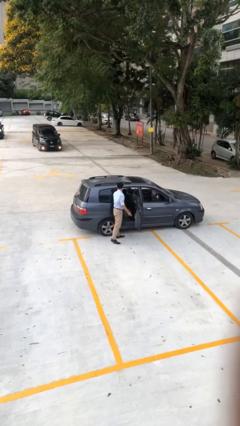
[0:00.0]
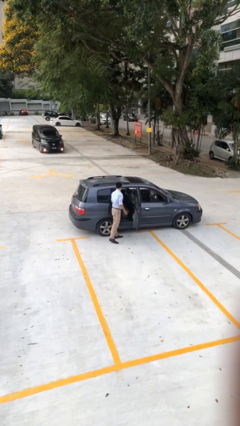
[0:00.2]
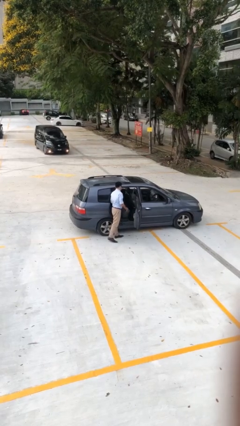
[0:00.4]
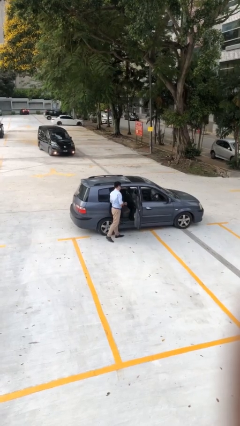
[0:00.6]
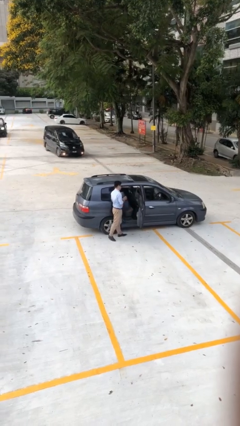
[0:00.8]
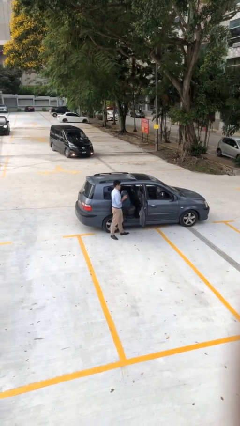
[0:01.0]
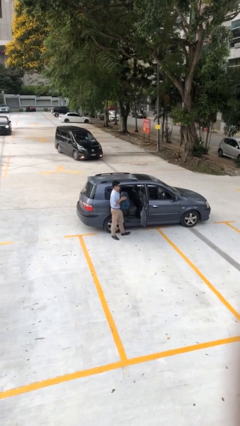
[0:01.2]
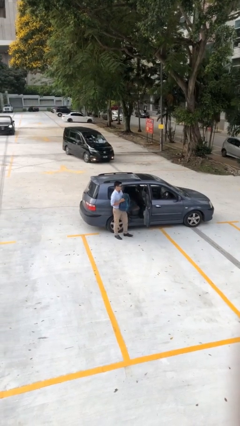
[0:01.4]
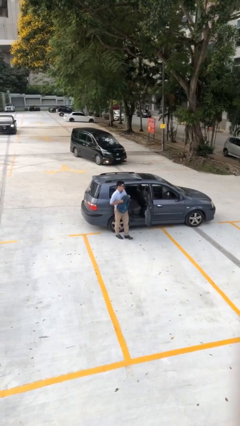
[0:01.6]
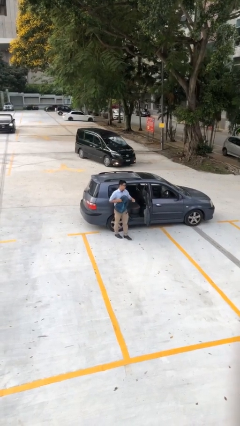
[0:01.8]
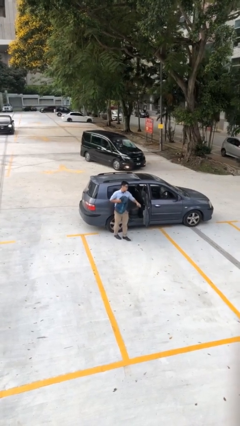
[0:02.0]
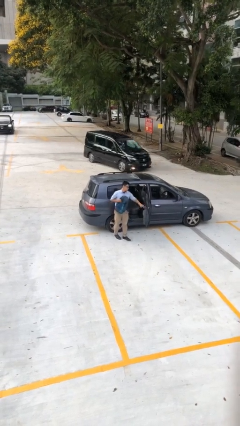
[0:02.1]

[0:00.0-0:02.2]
person unloads car

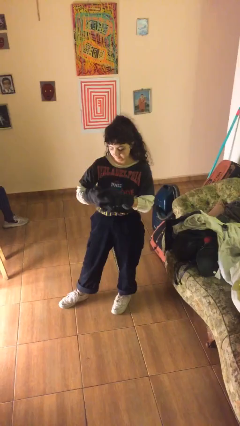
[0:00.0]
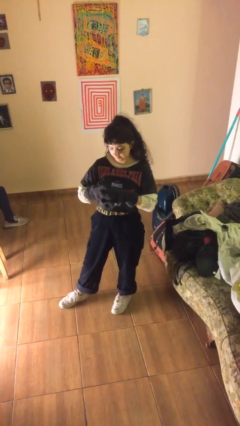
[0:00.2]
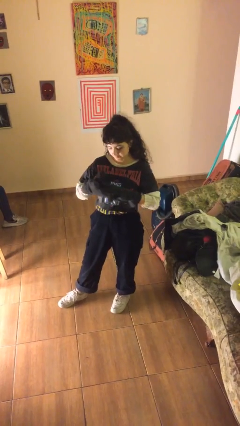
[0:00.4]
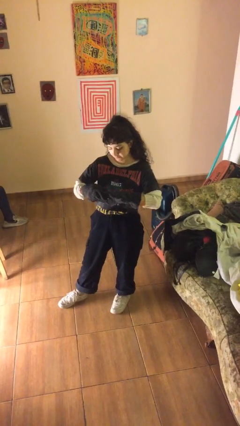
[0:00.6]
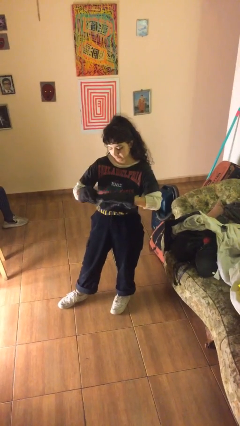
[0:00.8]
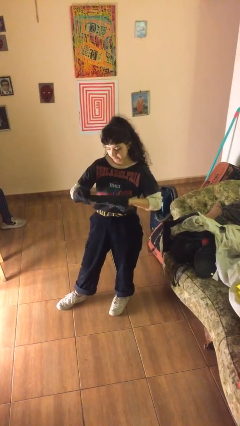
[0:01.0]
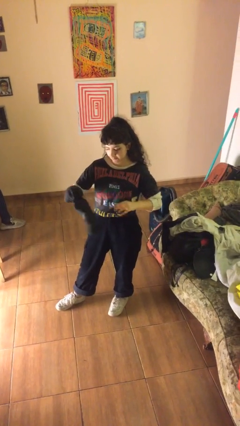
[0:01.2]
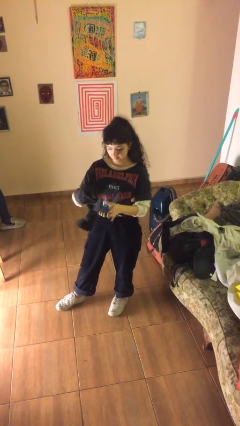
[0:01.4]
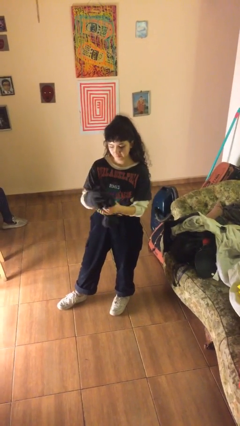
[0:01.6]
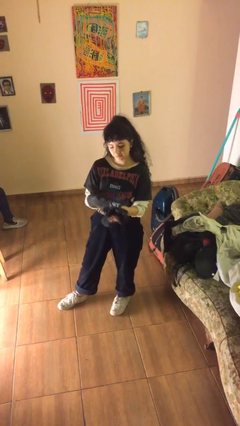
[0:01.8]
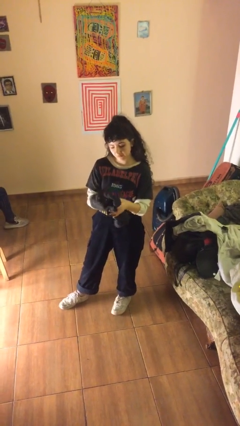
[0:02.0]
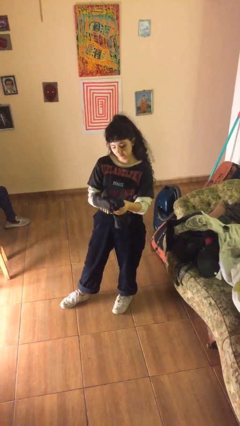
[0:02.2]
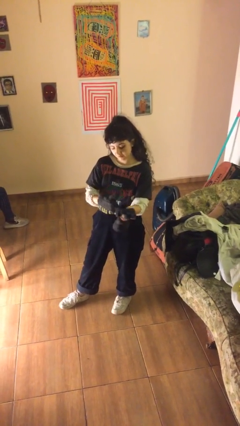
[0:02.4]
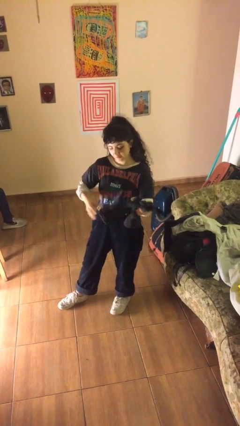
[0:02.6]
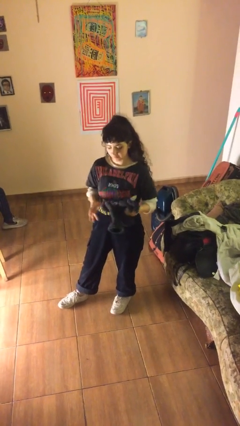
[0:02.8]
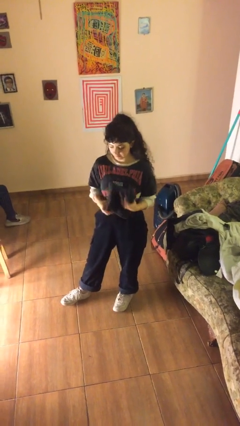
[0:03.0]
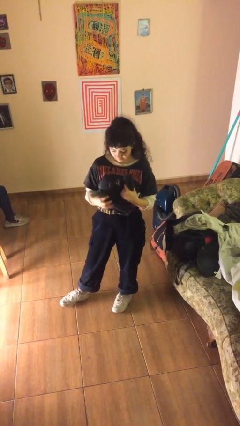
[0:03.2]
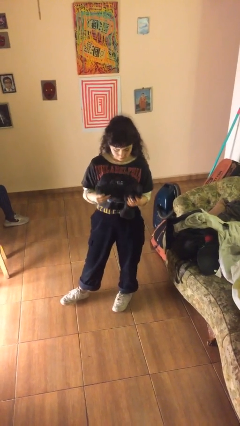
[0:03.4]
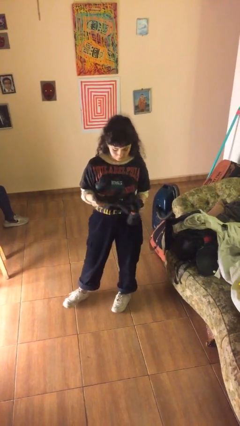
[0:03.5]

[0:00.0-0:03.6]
person takes off gloves

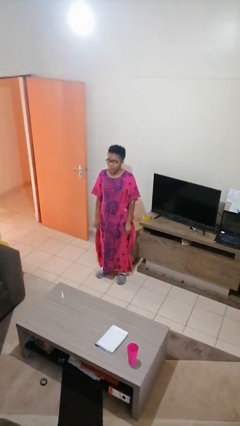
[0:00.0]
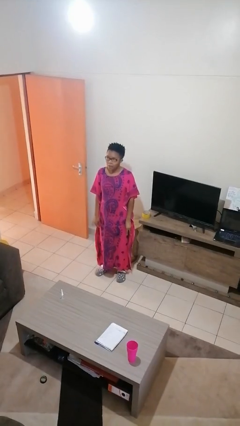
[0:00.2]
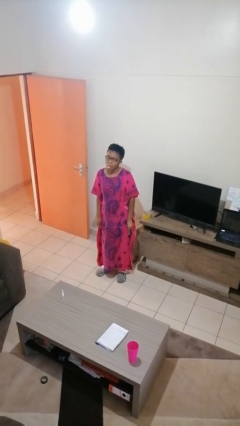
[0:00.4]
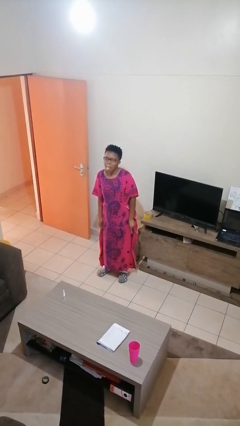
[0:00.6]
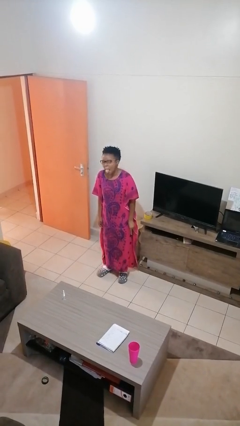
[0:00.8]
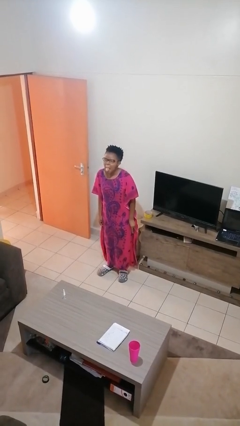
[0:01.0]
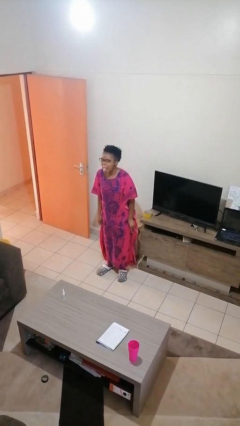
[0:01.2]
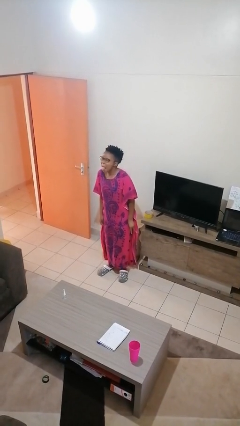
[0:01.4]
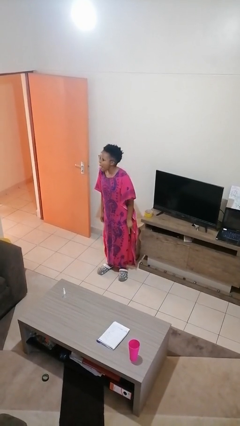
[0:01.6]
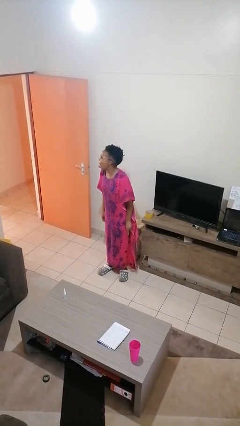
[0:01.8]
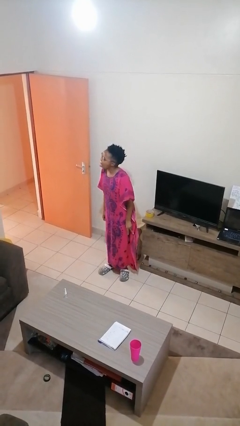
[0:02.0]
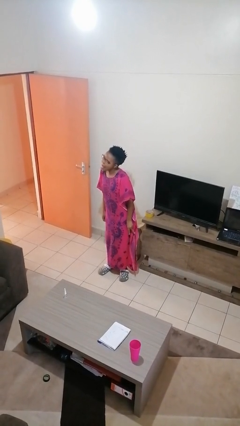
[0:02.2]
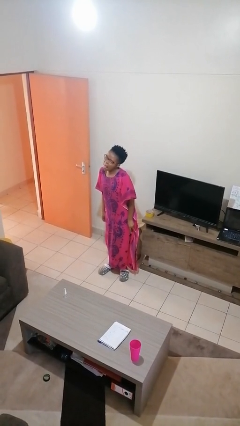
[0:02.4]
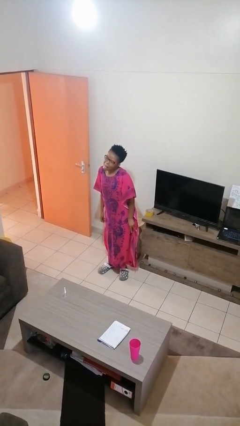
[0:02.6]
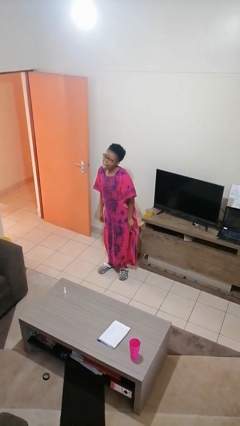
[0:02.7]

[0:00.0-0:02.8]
person sticks out tongue

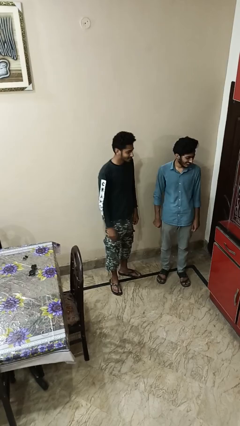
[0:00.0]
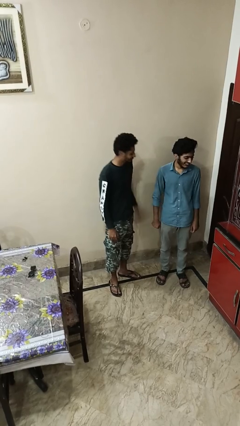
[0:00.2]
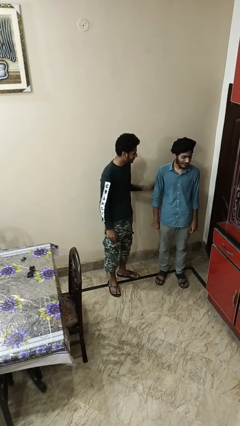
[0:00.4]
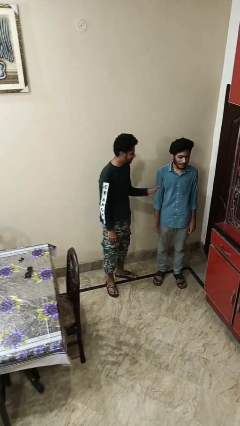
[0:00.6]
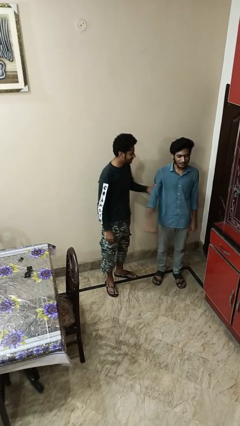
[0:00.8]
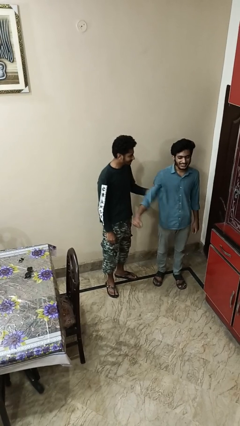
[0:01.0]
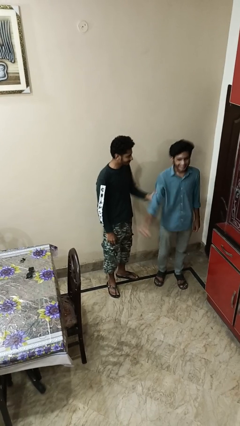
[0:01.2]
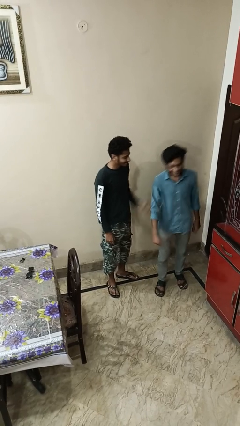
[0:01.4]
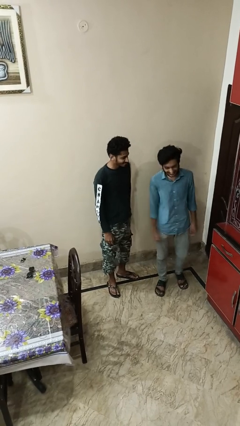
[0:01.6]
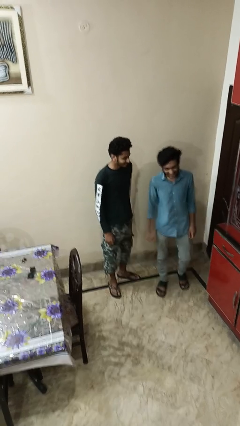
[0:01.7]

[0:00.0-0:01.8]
person grabs person by bicep

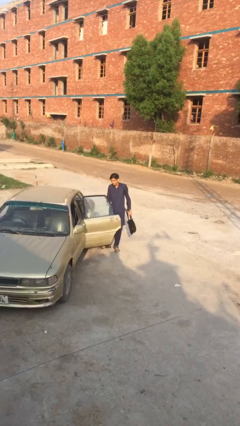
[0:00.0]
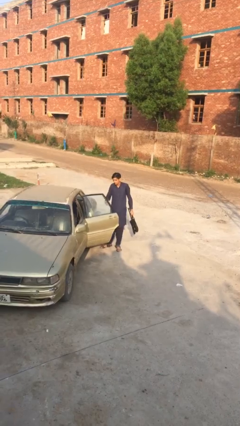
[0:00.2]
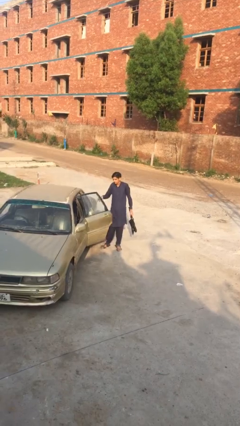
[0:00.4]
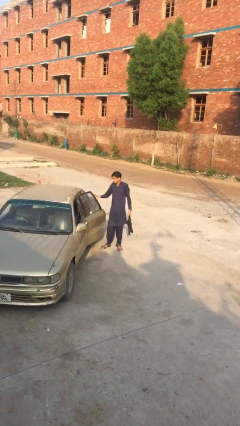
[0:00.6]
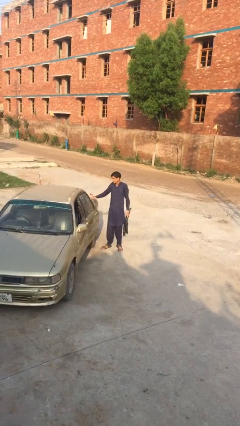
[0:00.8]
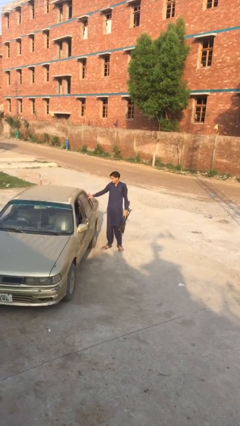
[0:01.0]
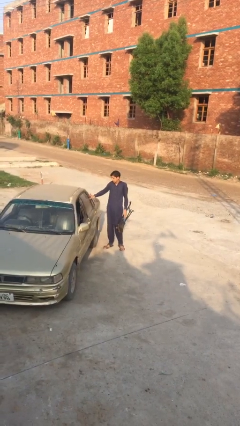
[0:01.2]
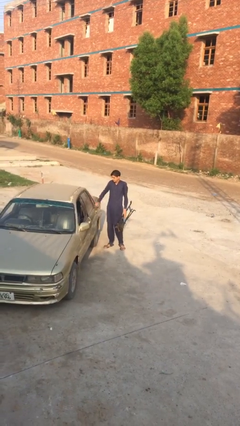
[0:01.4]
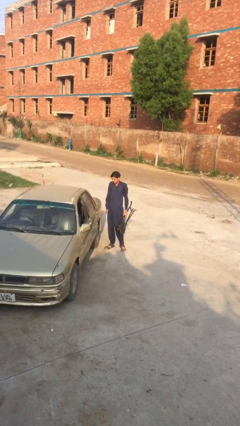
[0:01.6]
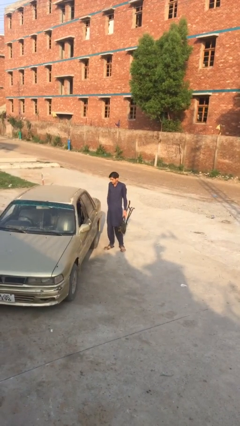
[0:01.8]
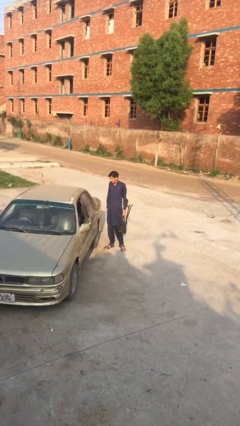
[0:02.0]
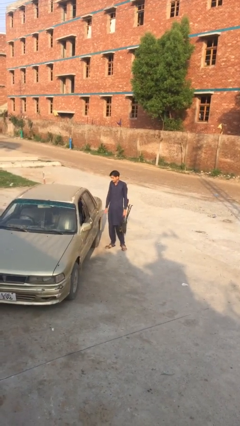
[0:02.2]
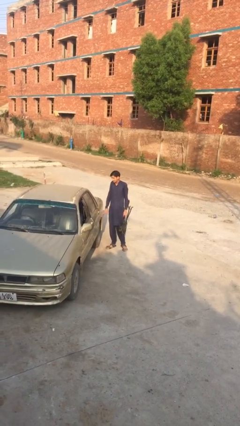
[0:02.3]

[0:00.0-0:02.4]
person closes car door

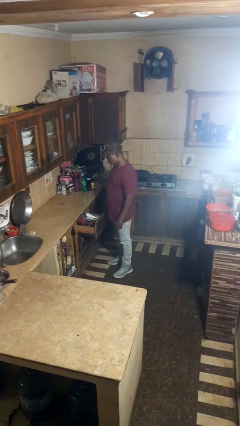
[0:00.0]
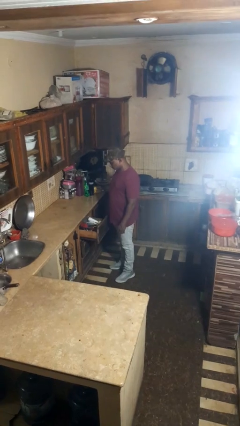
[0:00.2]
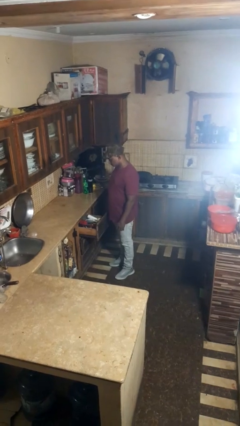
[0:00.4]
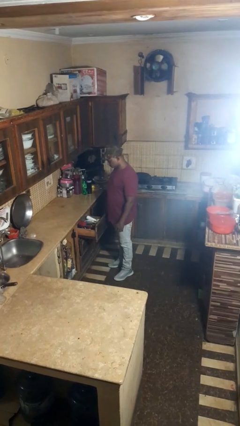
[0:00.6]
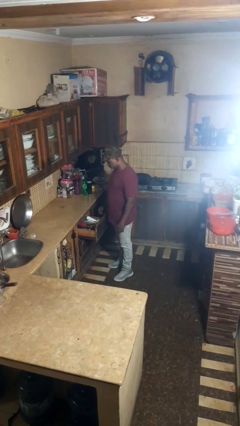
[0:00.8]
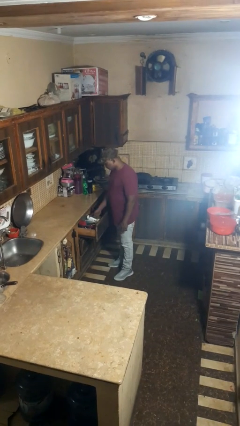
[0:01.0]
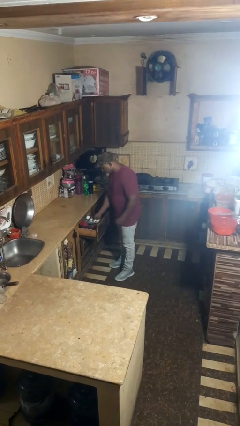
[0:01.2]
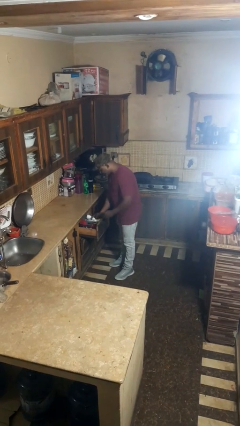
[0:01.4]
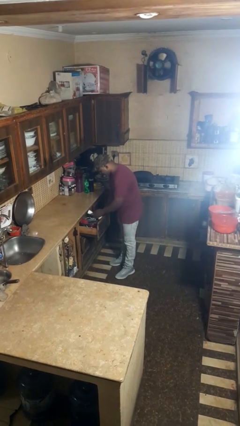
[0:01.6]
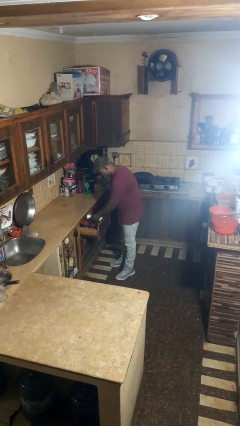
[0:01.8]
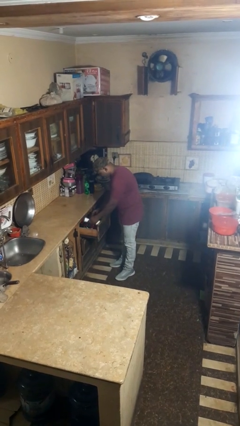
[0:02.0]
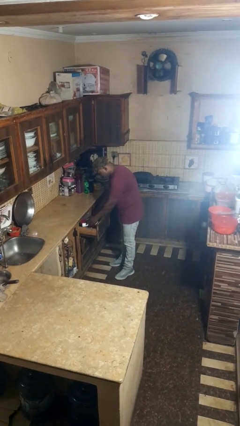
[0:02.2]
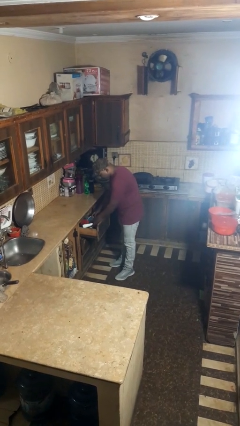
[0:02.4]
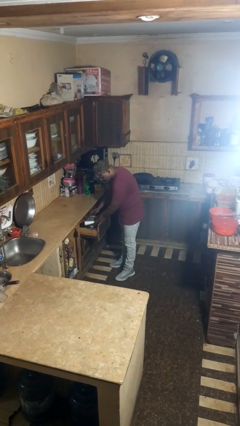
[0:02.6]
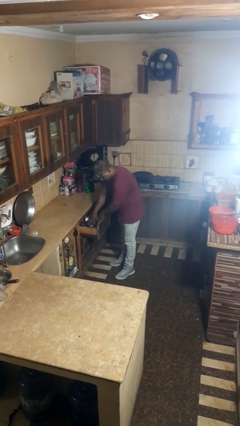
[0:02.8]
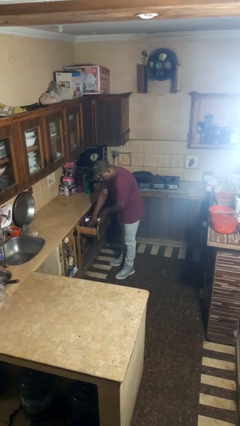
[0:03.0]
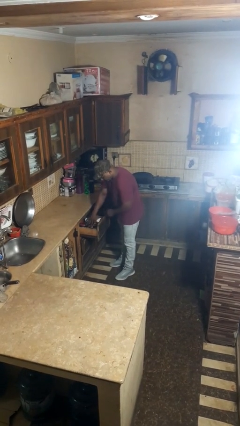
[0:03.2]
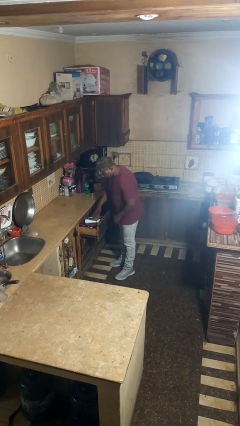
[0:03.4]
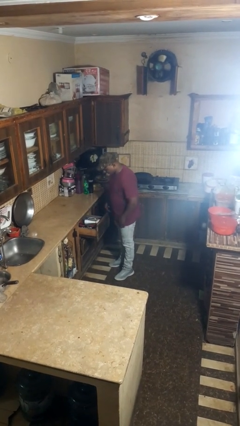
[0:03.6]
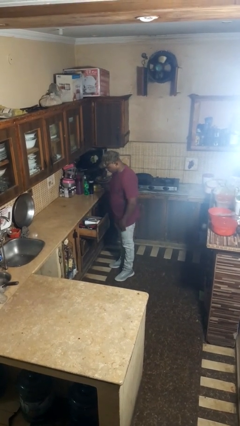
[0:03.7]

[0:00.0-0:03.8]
person searches in kitchen drawer

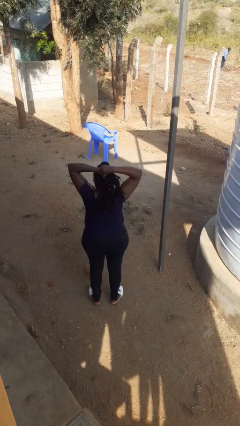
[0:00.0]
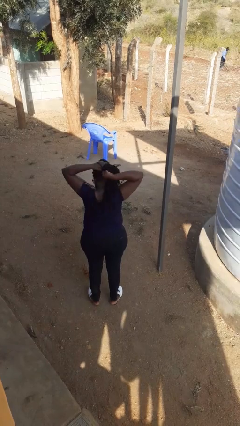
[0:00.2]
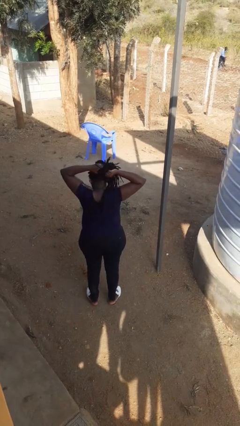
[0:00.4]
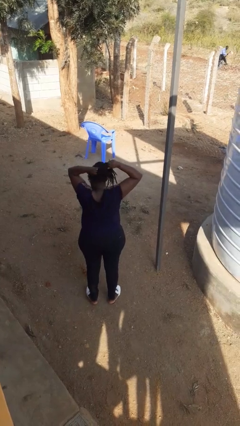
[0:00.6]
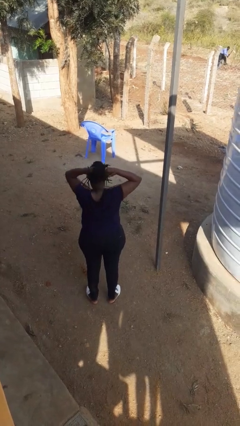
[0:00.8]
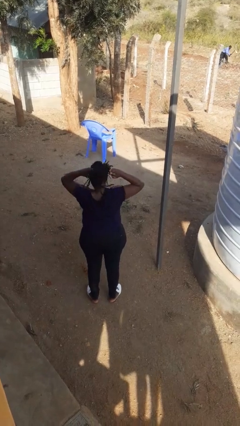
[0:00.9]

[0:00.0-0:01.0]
person takes off hairtie
